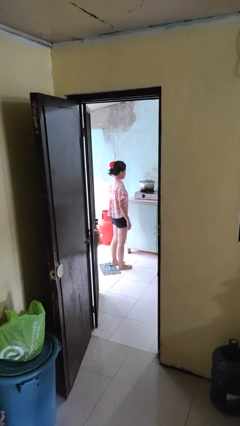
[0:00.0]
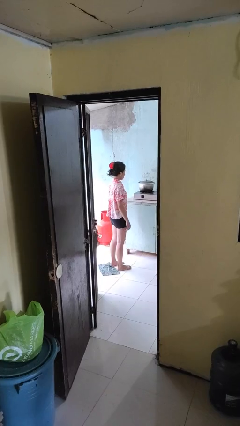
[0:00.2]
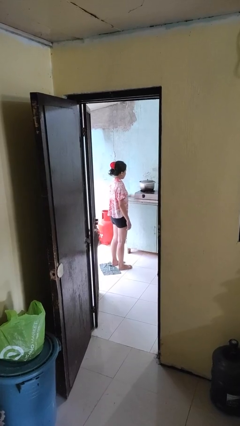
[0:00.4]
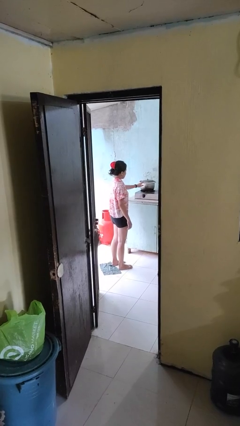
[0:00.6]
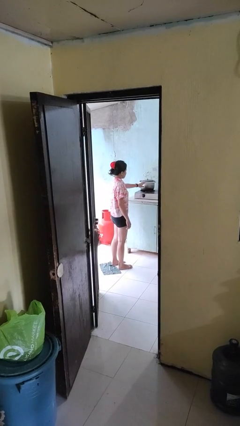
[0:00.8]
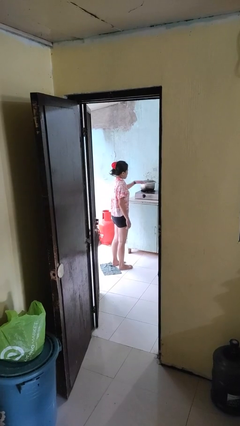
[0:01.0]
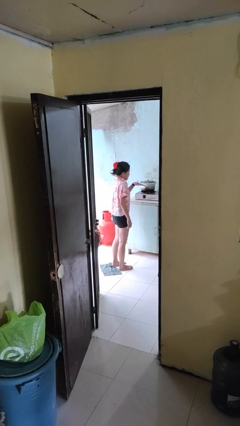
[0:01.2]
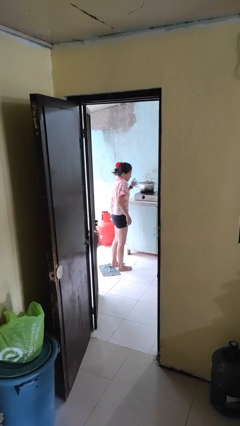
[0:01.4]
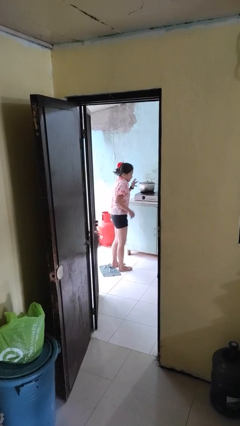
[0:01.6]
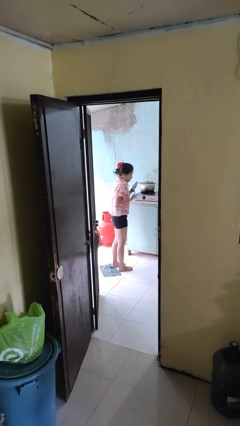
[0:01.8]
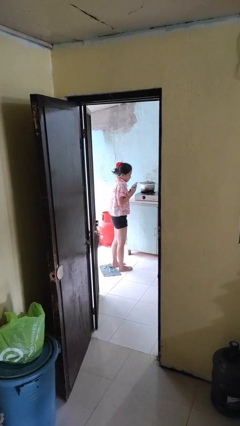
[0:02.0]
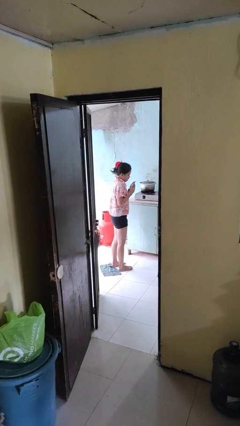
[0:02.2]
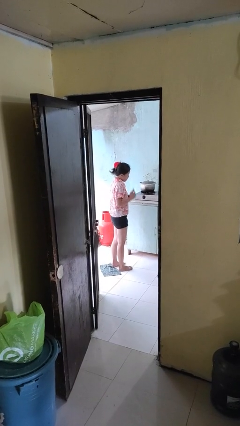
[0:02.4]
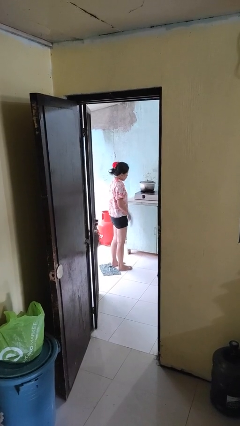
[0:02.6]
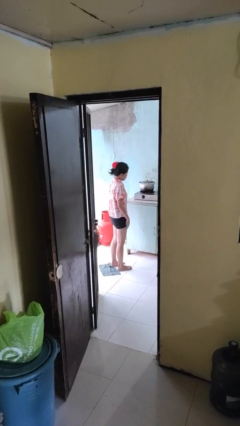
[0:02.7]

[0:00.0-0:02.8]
person burns hand

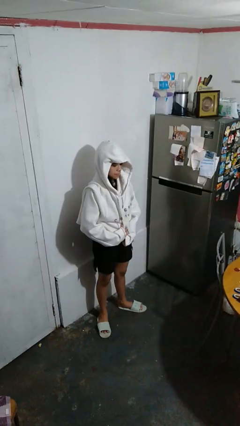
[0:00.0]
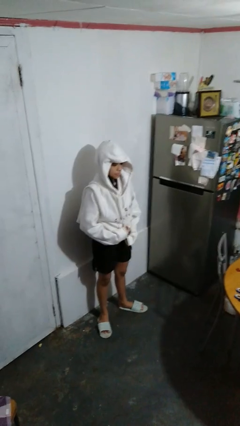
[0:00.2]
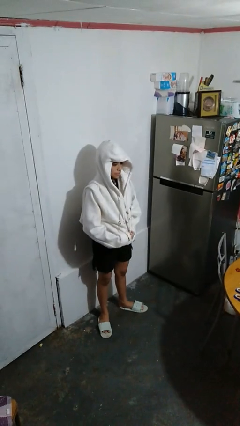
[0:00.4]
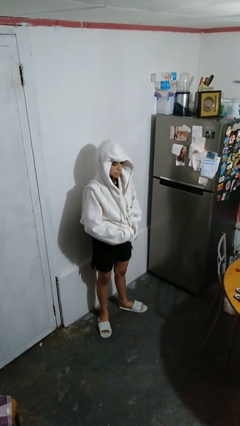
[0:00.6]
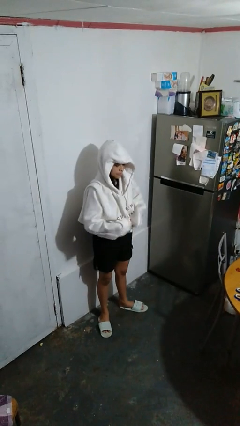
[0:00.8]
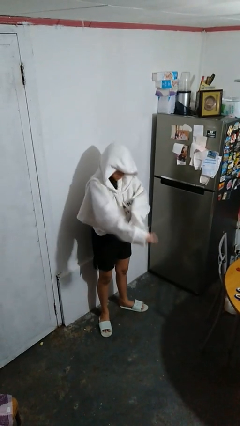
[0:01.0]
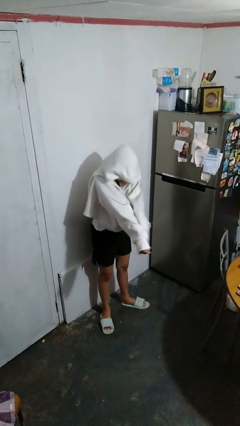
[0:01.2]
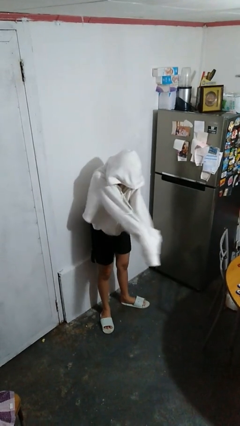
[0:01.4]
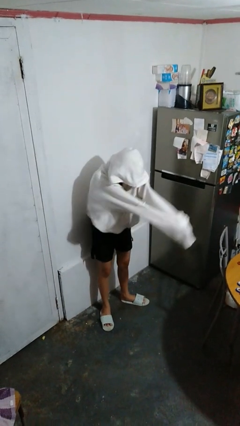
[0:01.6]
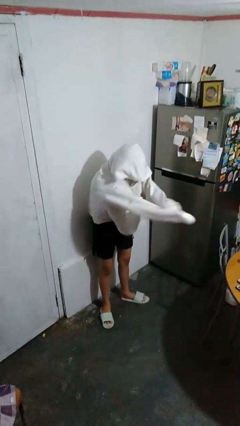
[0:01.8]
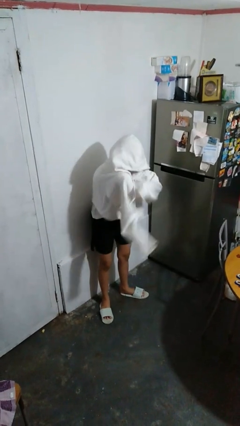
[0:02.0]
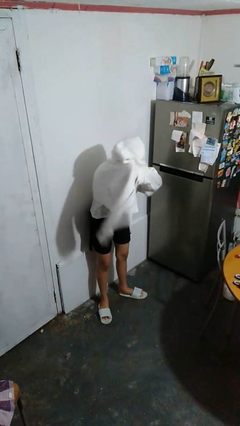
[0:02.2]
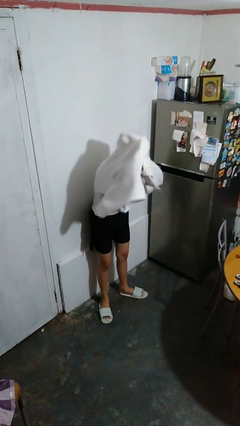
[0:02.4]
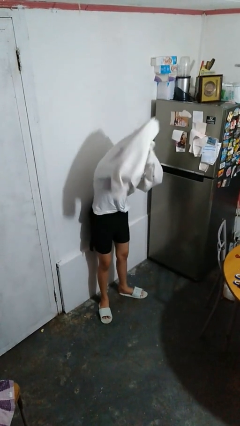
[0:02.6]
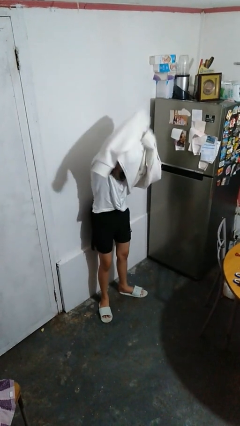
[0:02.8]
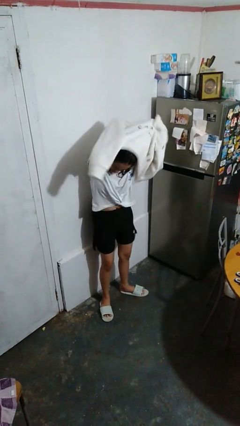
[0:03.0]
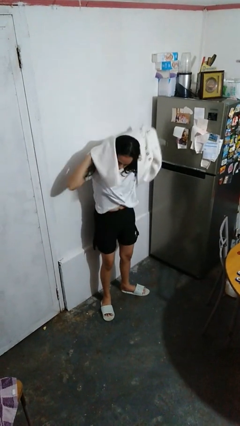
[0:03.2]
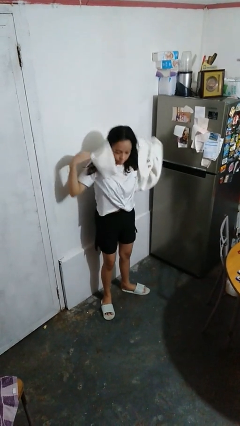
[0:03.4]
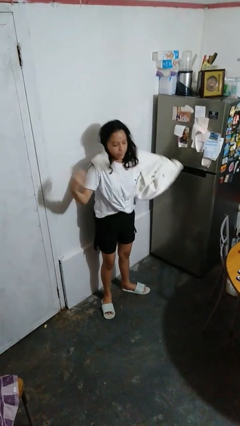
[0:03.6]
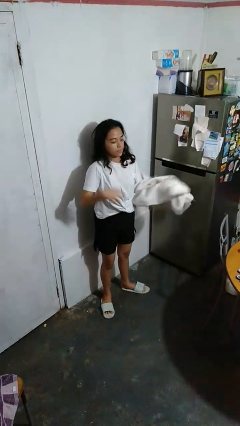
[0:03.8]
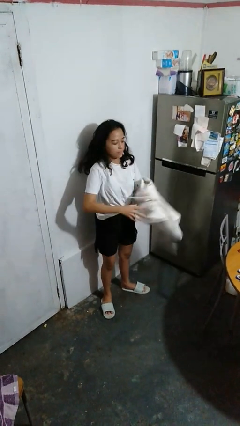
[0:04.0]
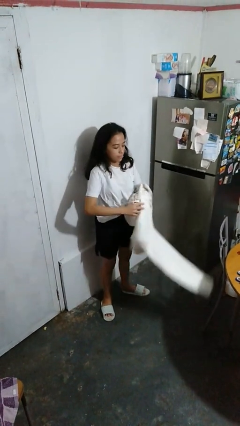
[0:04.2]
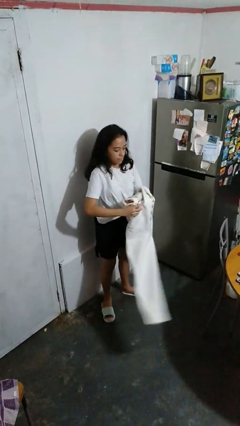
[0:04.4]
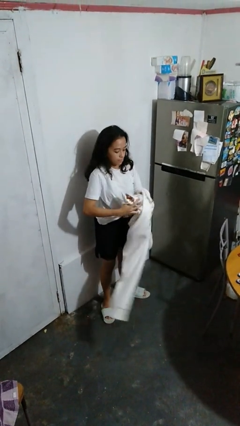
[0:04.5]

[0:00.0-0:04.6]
person takes off hoodie

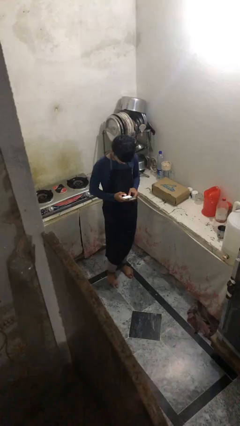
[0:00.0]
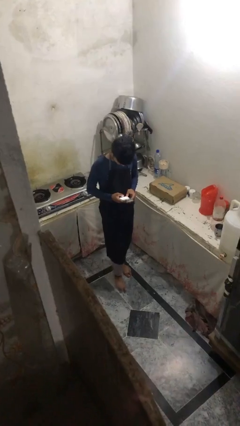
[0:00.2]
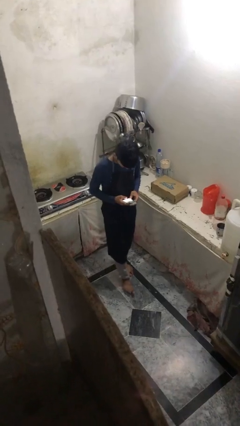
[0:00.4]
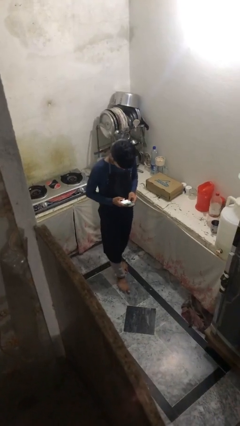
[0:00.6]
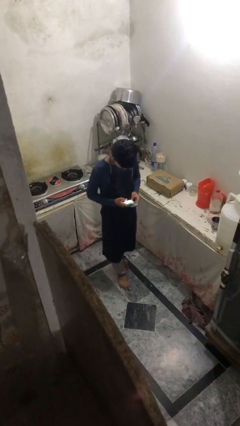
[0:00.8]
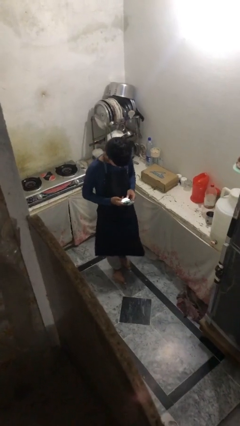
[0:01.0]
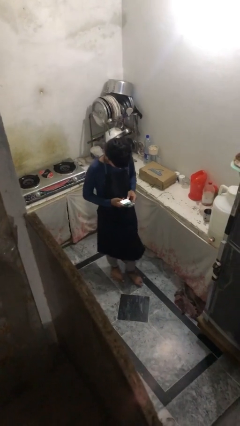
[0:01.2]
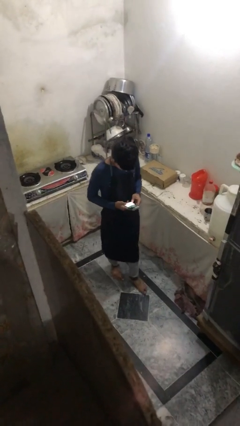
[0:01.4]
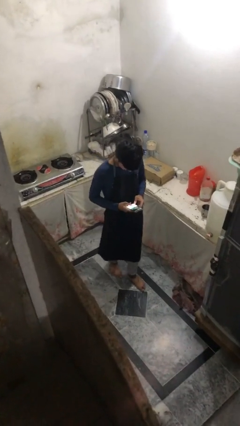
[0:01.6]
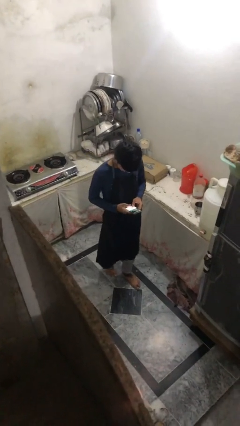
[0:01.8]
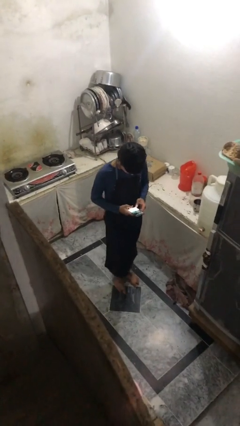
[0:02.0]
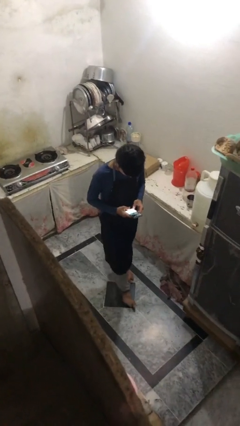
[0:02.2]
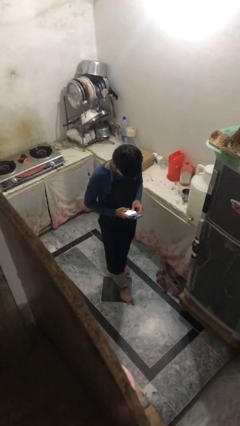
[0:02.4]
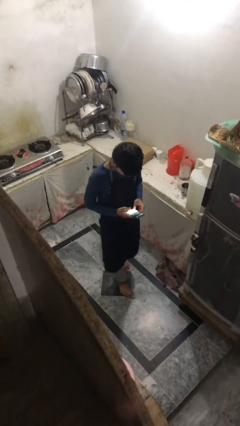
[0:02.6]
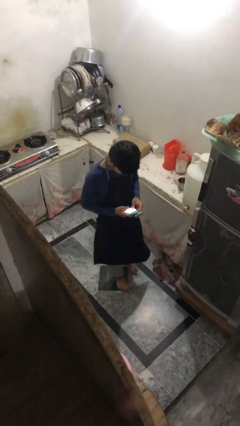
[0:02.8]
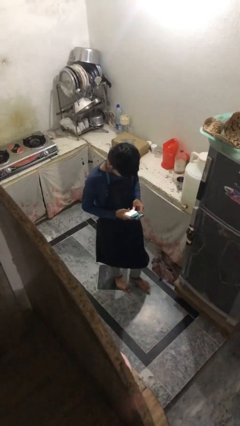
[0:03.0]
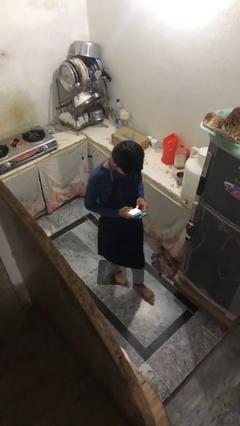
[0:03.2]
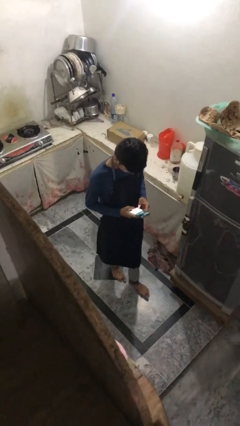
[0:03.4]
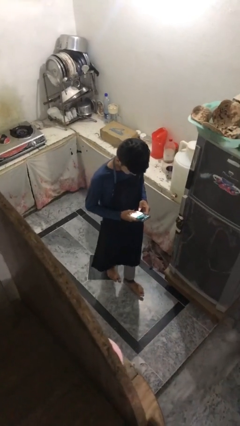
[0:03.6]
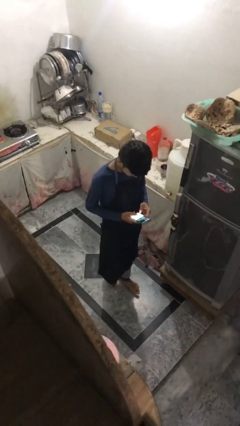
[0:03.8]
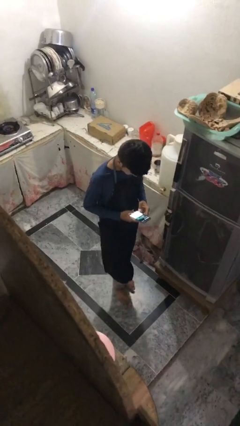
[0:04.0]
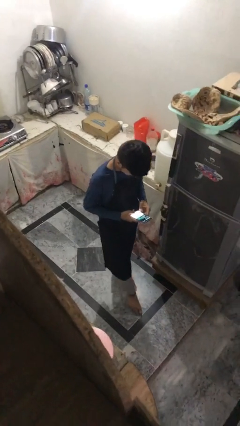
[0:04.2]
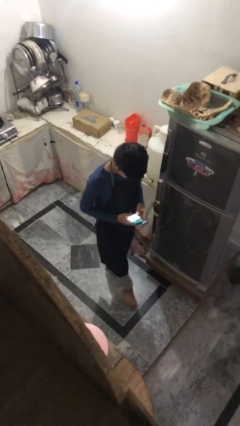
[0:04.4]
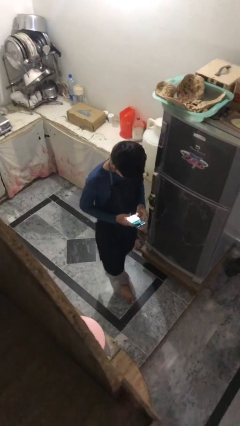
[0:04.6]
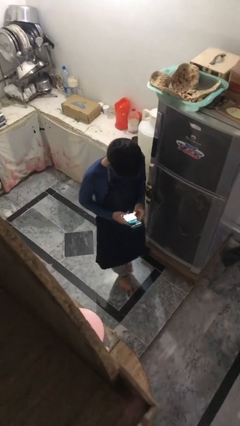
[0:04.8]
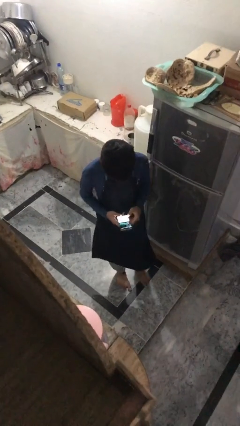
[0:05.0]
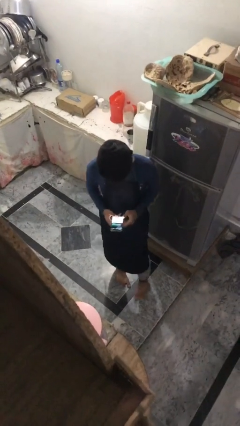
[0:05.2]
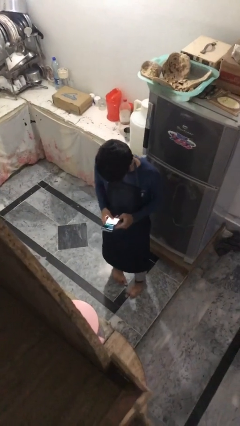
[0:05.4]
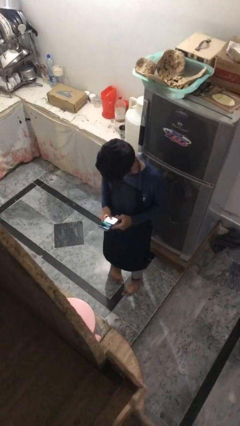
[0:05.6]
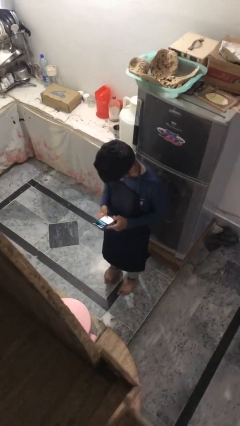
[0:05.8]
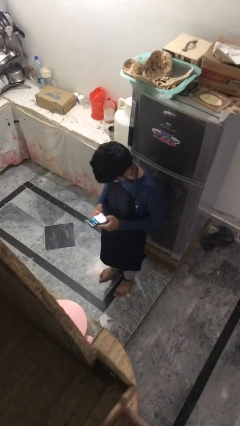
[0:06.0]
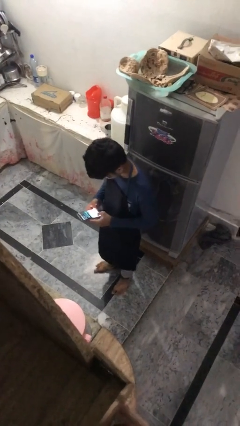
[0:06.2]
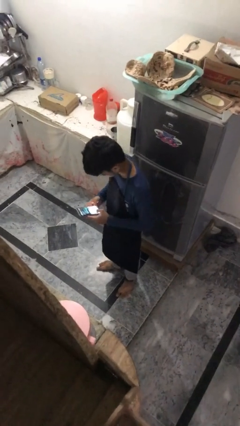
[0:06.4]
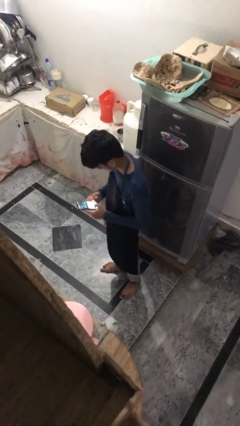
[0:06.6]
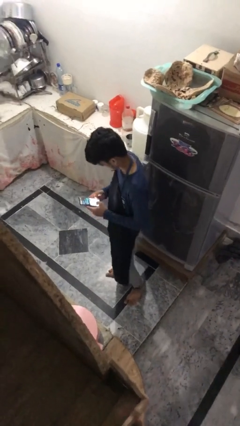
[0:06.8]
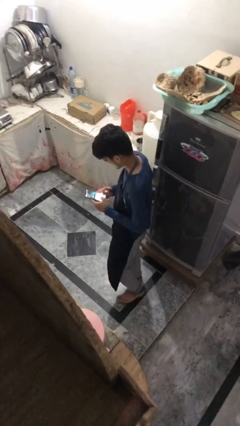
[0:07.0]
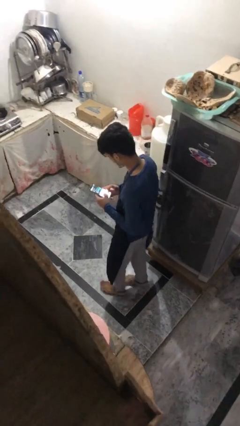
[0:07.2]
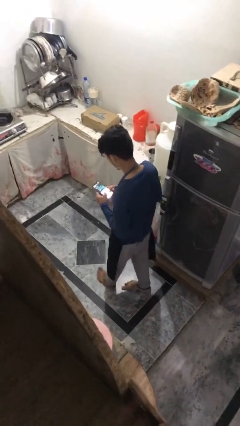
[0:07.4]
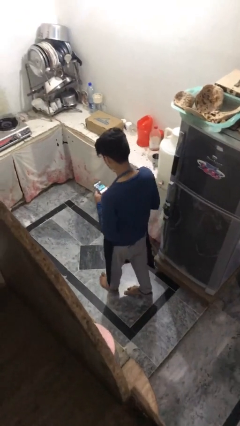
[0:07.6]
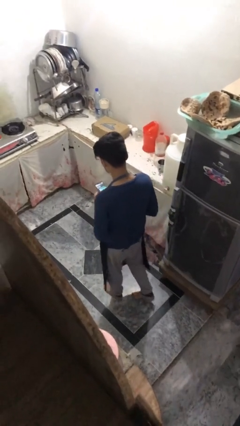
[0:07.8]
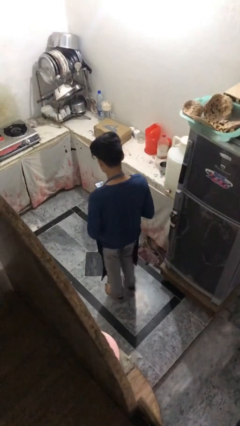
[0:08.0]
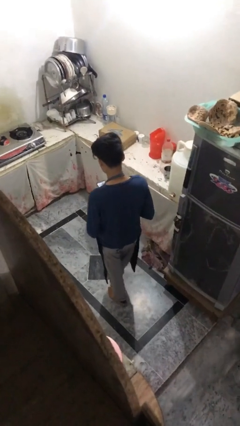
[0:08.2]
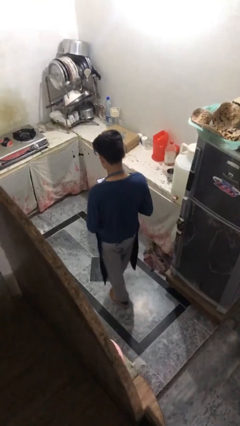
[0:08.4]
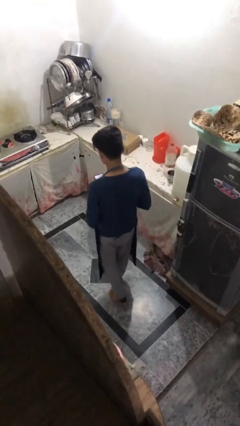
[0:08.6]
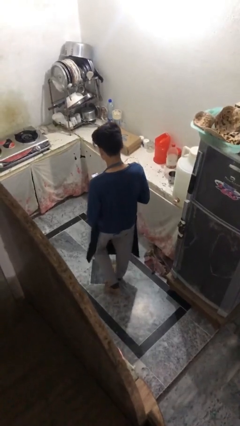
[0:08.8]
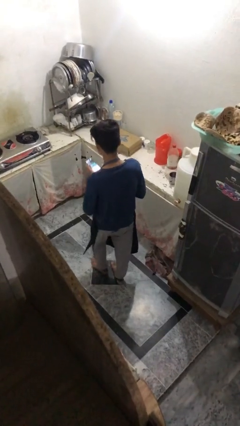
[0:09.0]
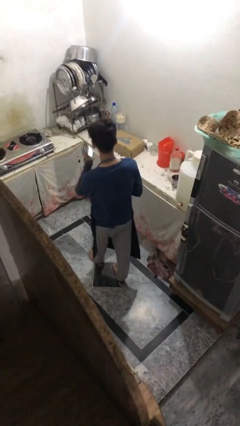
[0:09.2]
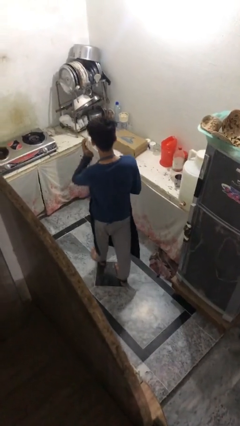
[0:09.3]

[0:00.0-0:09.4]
person texts on phone

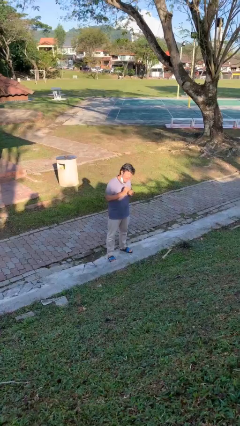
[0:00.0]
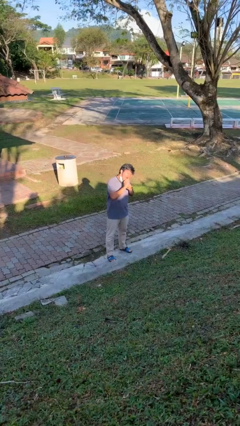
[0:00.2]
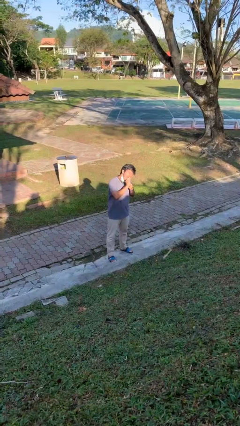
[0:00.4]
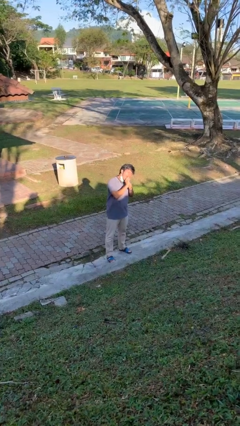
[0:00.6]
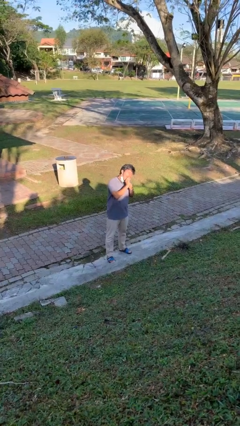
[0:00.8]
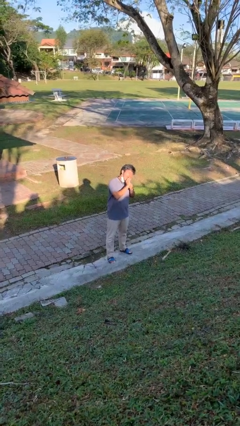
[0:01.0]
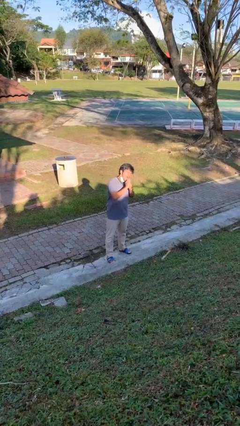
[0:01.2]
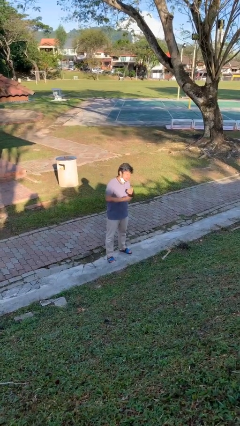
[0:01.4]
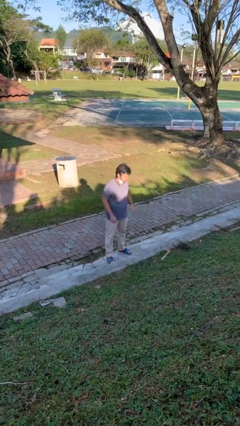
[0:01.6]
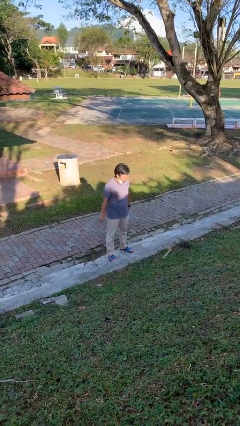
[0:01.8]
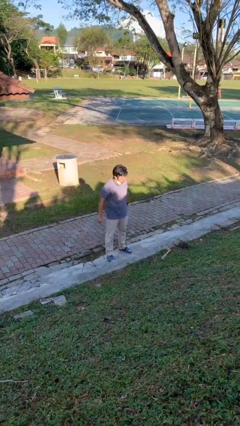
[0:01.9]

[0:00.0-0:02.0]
person flosses
